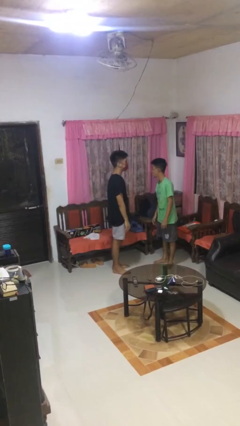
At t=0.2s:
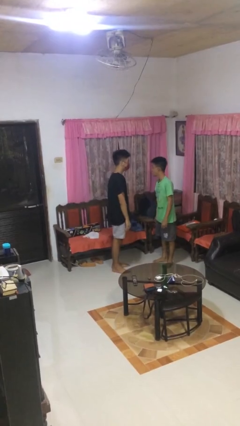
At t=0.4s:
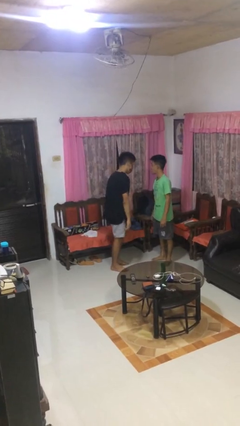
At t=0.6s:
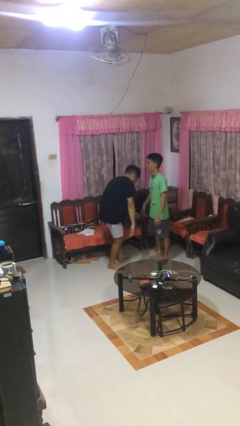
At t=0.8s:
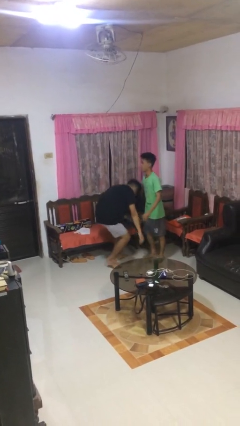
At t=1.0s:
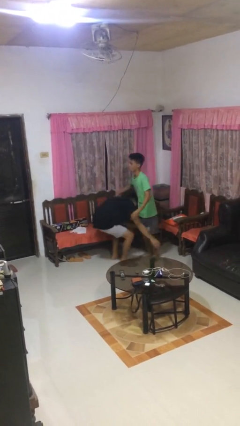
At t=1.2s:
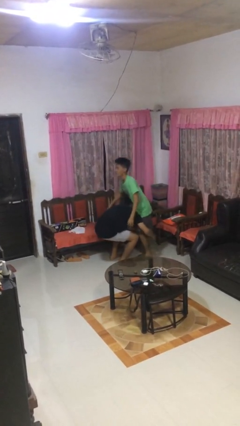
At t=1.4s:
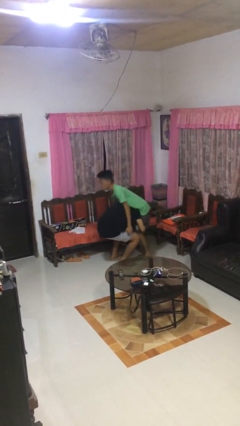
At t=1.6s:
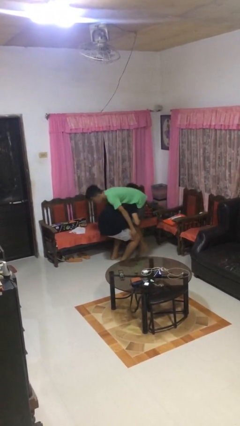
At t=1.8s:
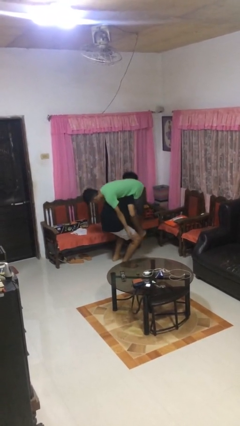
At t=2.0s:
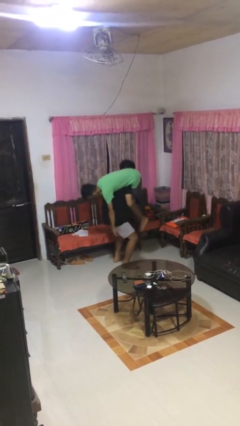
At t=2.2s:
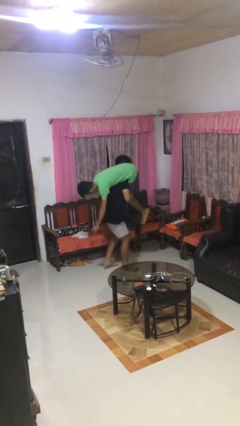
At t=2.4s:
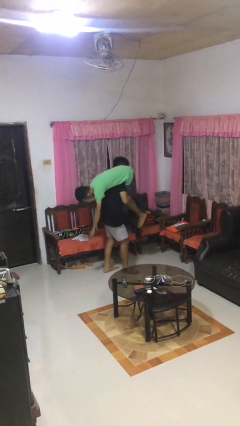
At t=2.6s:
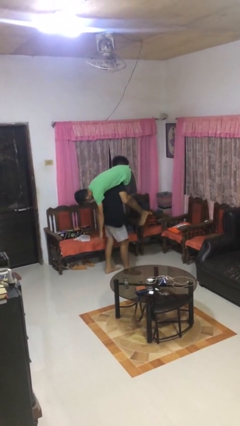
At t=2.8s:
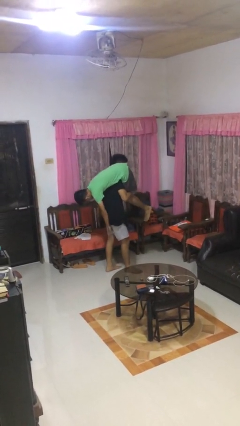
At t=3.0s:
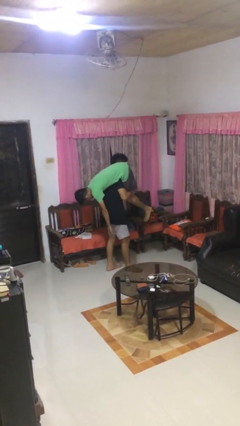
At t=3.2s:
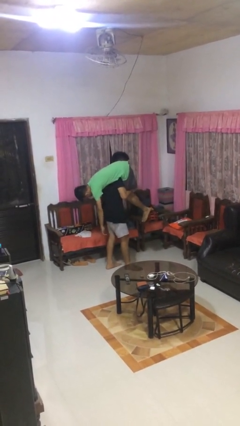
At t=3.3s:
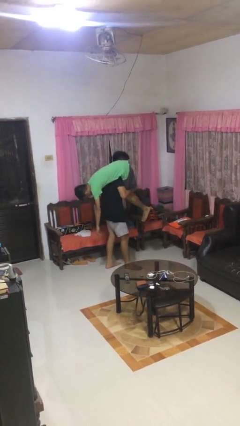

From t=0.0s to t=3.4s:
person carries person over shoulder

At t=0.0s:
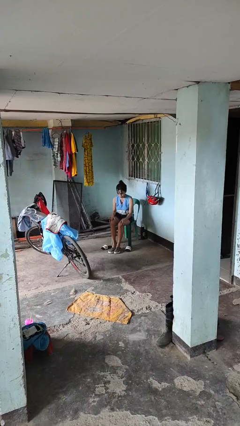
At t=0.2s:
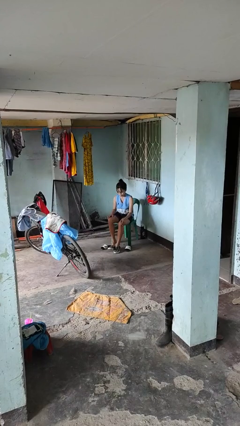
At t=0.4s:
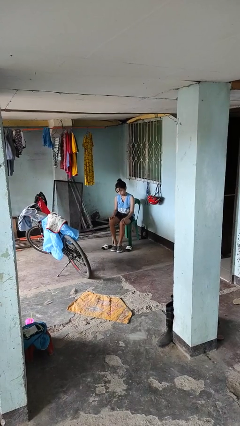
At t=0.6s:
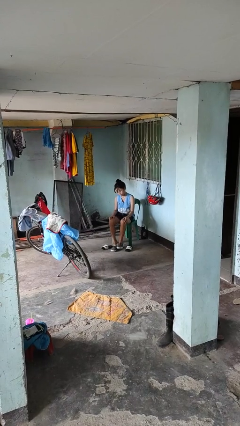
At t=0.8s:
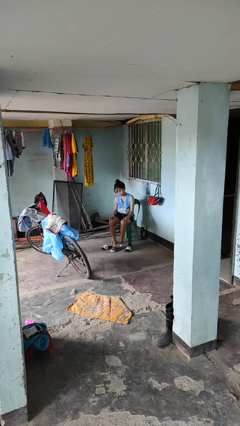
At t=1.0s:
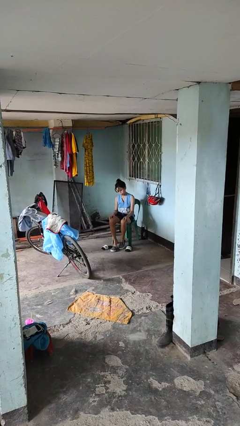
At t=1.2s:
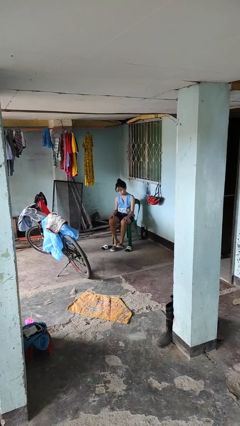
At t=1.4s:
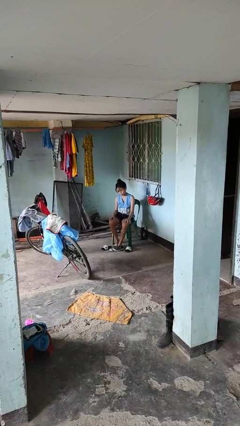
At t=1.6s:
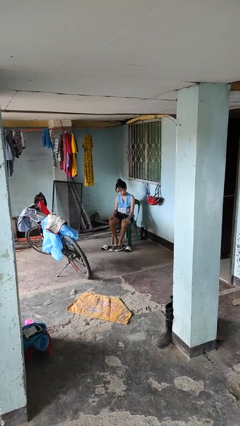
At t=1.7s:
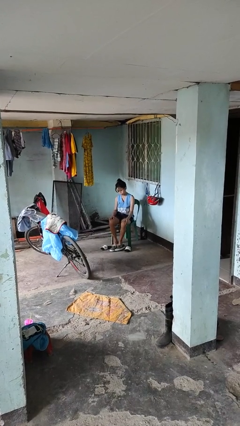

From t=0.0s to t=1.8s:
person takes off shoes

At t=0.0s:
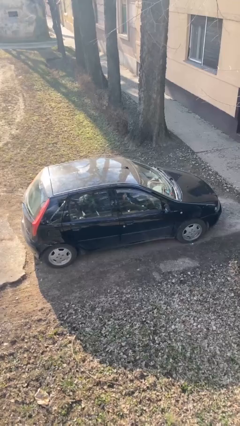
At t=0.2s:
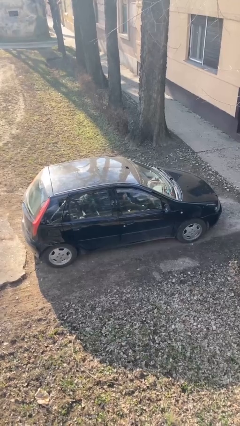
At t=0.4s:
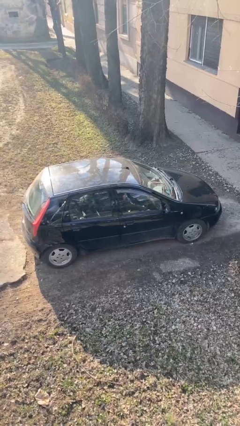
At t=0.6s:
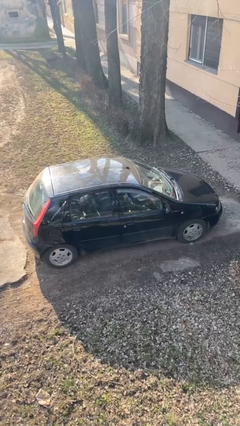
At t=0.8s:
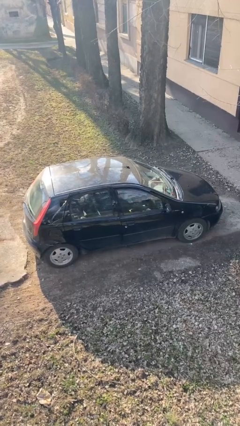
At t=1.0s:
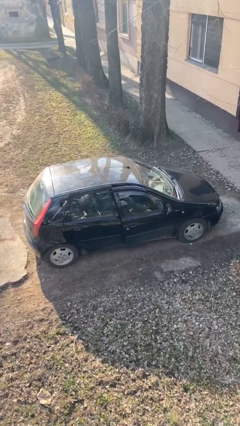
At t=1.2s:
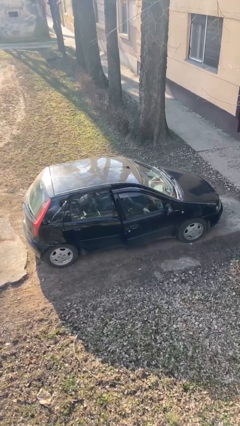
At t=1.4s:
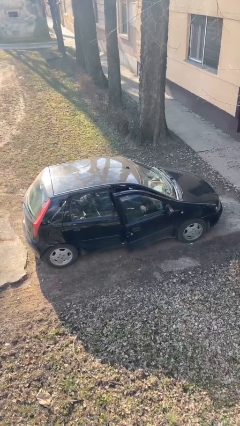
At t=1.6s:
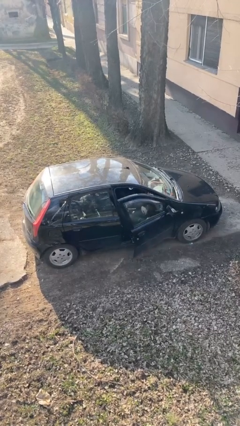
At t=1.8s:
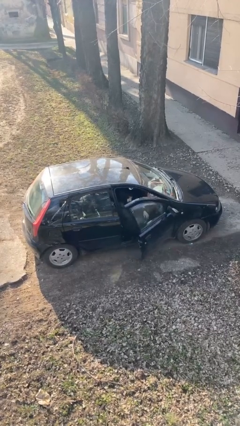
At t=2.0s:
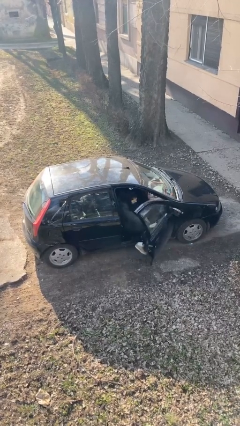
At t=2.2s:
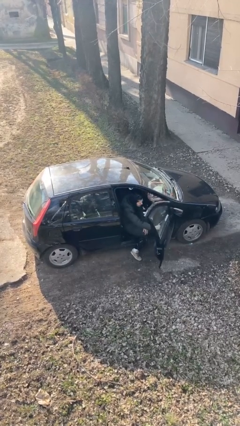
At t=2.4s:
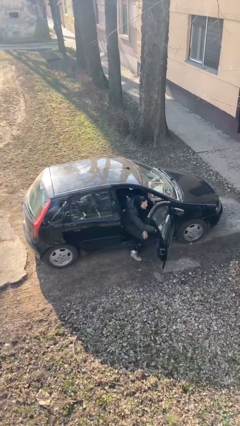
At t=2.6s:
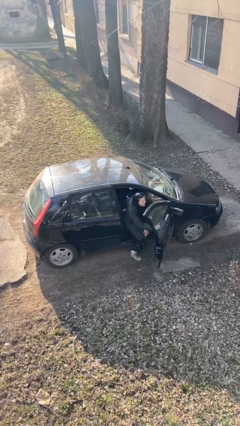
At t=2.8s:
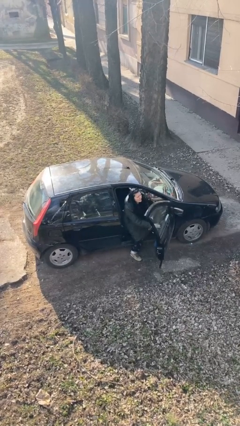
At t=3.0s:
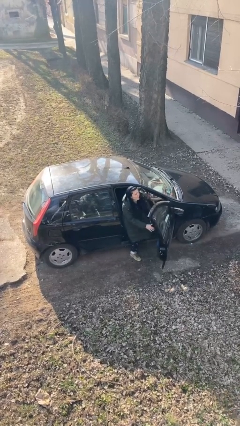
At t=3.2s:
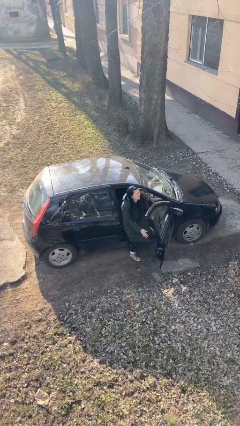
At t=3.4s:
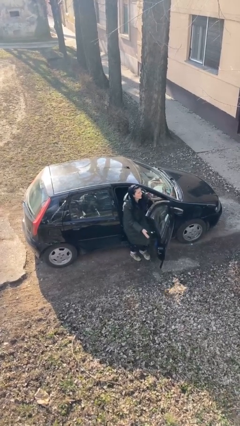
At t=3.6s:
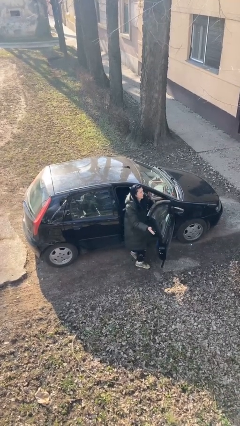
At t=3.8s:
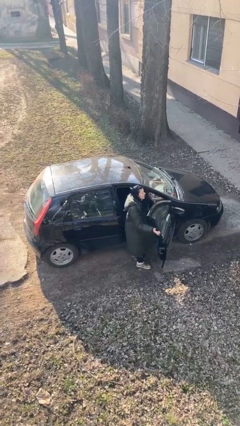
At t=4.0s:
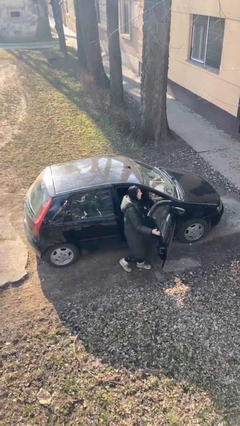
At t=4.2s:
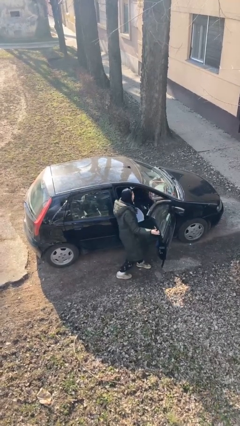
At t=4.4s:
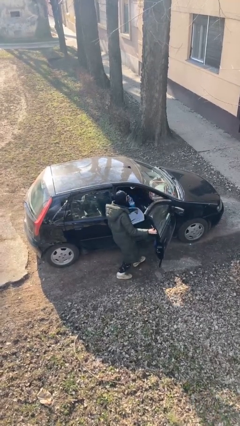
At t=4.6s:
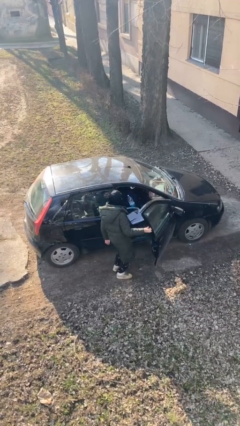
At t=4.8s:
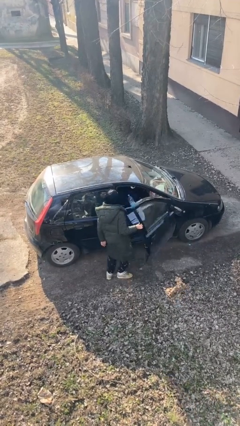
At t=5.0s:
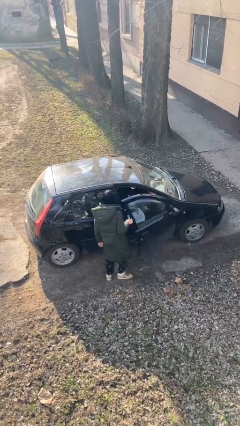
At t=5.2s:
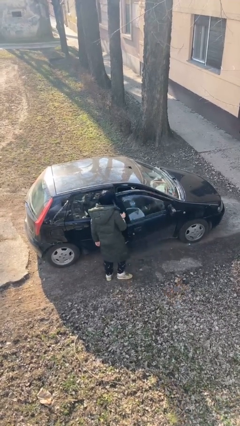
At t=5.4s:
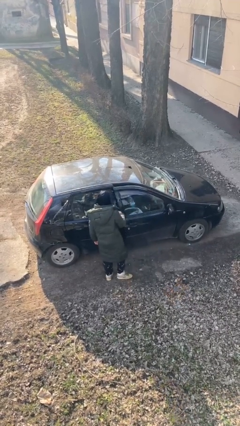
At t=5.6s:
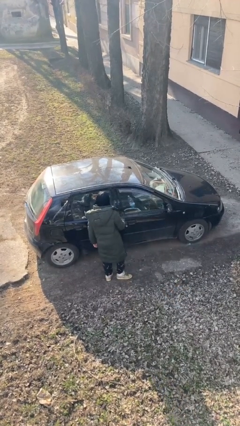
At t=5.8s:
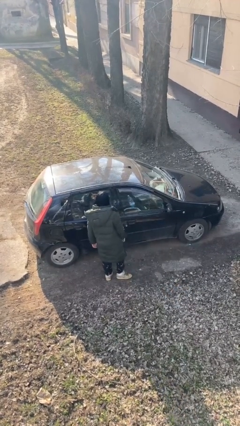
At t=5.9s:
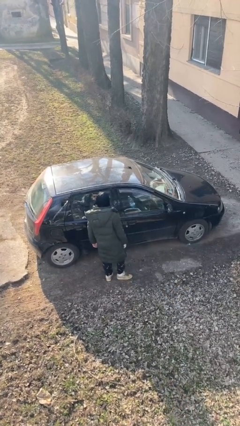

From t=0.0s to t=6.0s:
car drops off person

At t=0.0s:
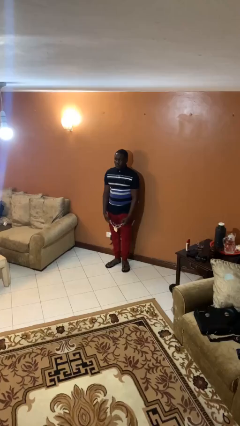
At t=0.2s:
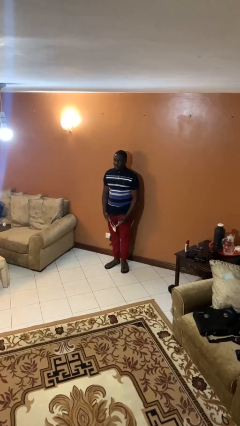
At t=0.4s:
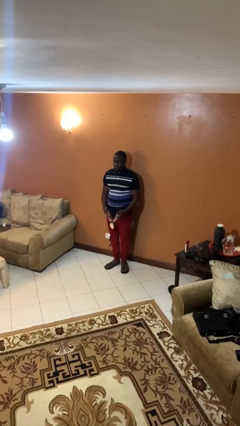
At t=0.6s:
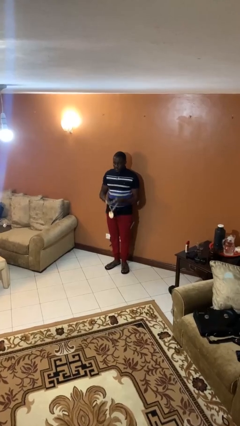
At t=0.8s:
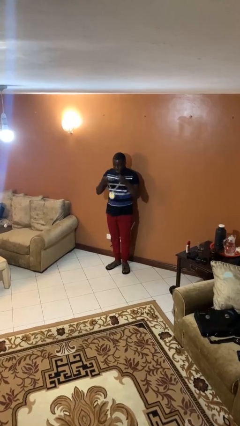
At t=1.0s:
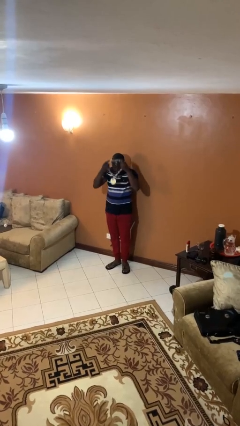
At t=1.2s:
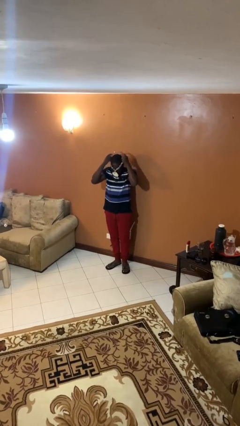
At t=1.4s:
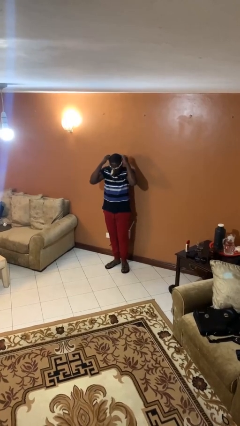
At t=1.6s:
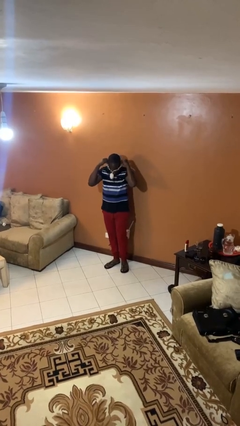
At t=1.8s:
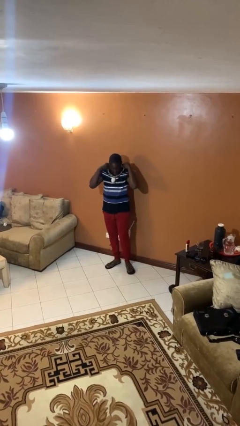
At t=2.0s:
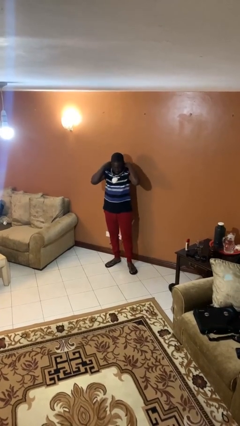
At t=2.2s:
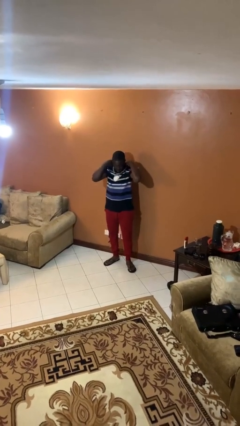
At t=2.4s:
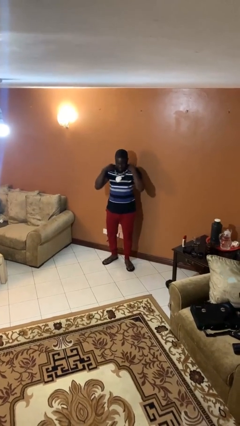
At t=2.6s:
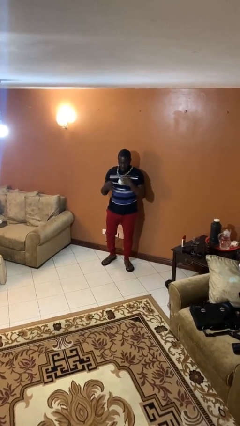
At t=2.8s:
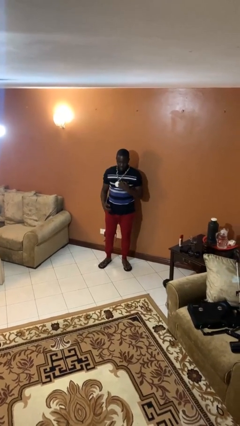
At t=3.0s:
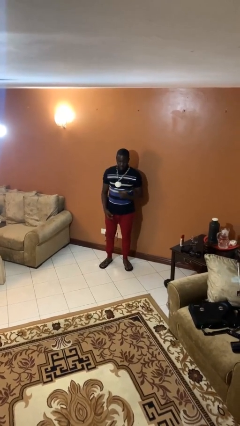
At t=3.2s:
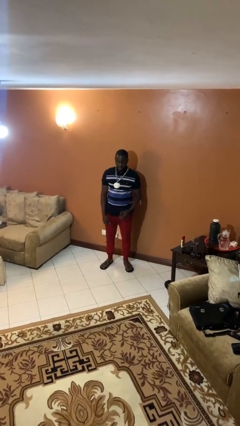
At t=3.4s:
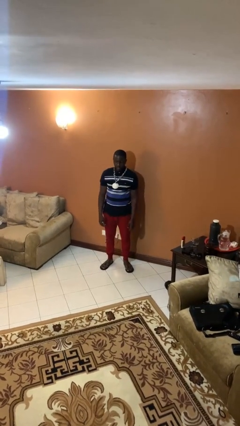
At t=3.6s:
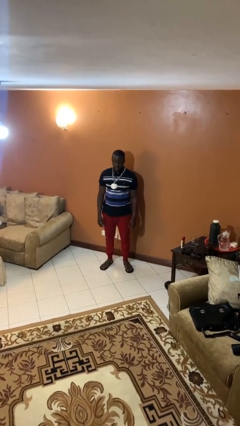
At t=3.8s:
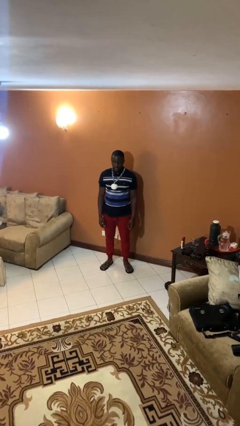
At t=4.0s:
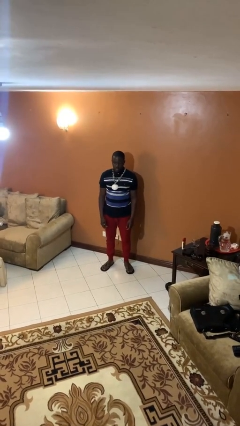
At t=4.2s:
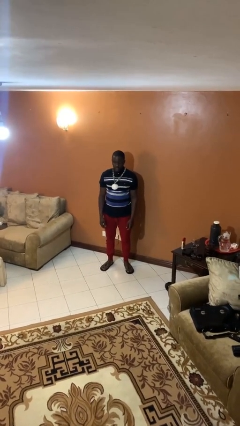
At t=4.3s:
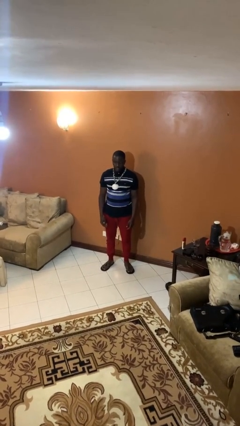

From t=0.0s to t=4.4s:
person puts on necklace

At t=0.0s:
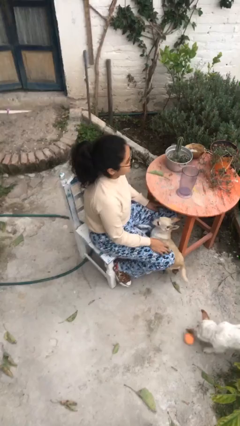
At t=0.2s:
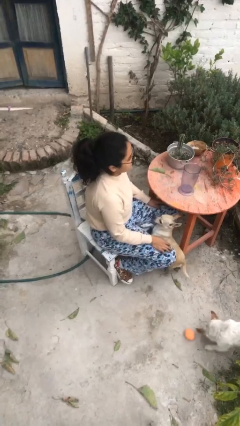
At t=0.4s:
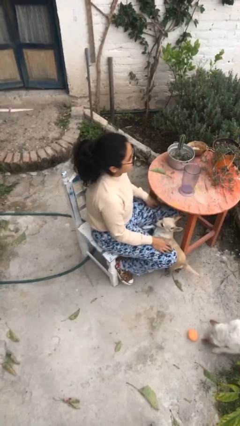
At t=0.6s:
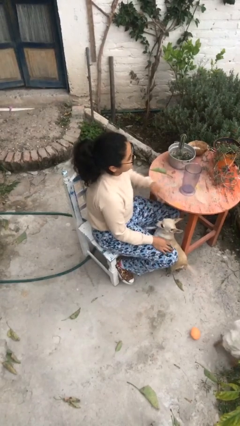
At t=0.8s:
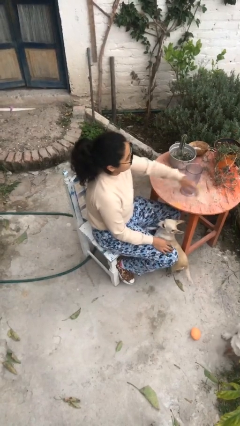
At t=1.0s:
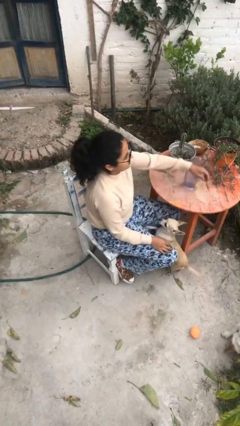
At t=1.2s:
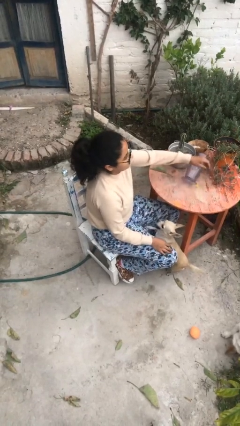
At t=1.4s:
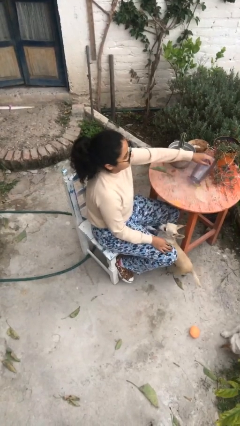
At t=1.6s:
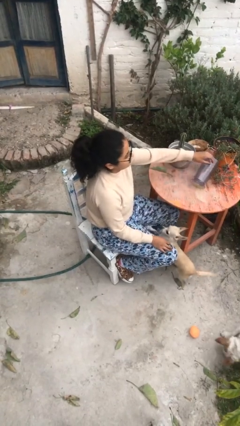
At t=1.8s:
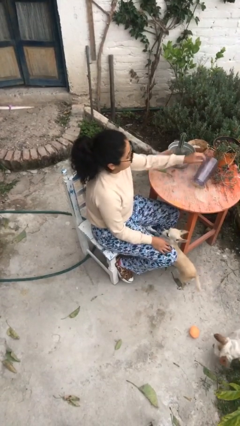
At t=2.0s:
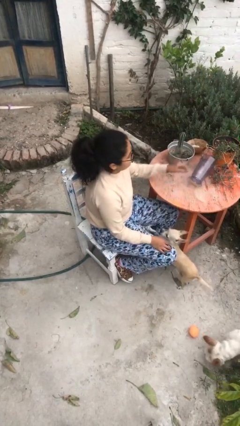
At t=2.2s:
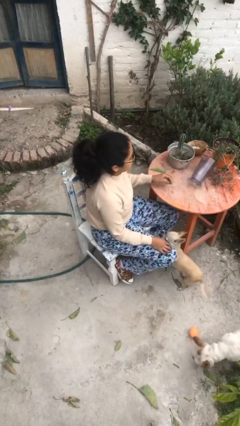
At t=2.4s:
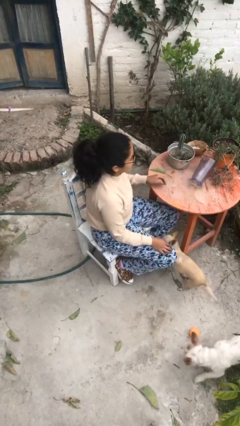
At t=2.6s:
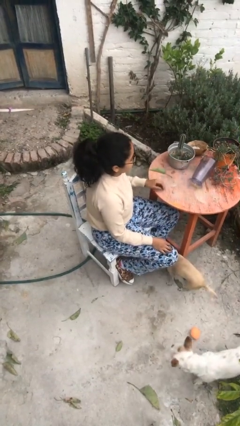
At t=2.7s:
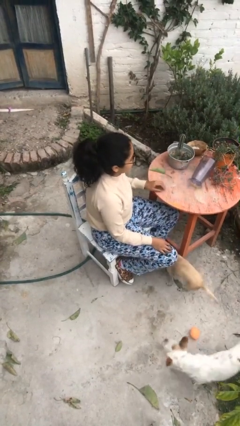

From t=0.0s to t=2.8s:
person knocks over glass
